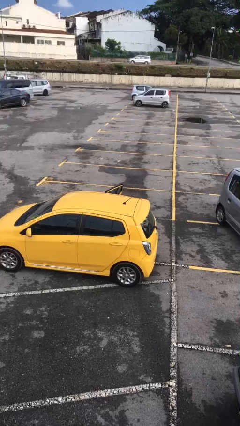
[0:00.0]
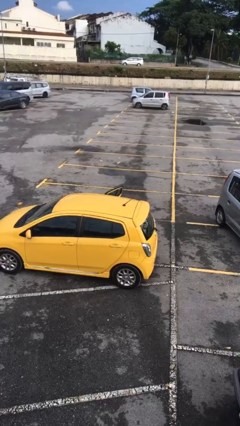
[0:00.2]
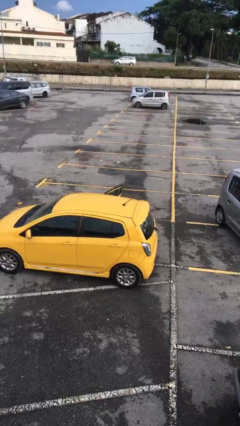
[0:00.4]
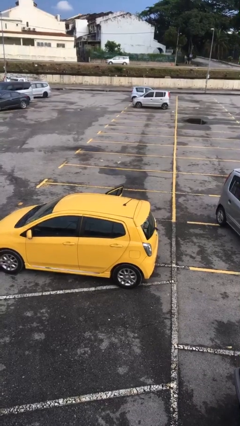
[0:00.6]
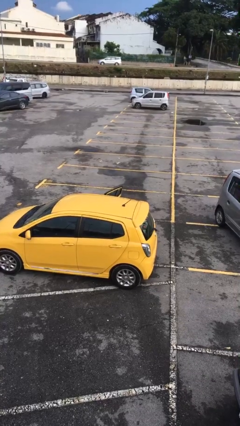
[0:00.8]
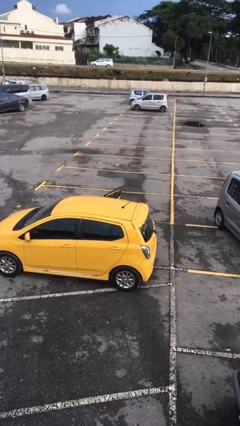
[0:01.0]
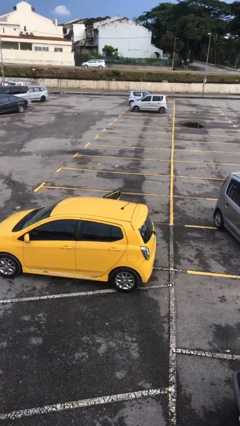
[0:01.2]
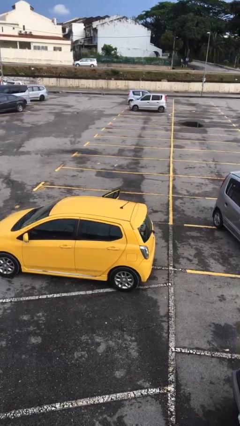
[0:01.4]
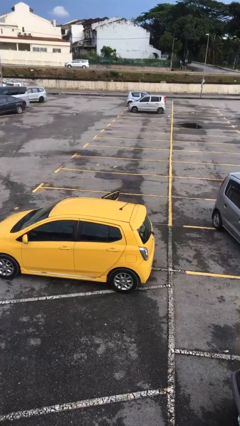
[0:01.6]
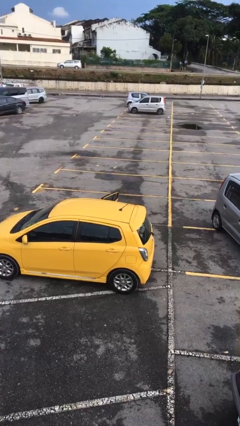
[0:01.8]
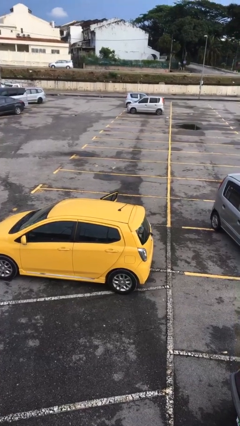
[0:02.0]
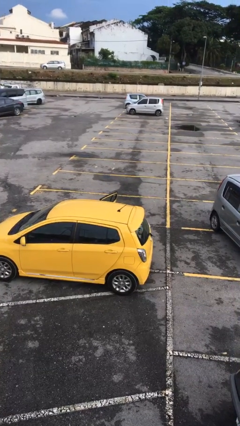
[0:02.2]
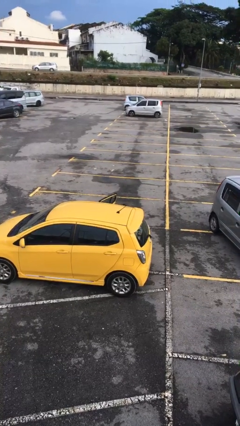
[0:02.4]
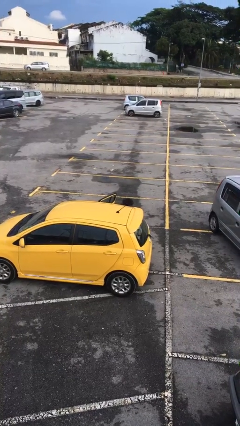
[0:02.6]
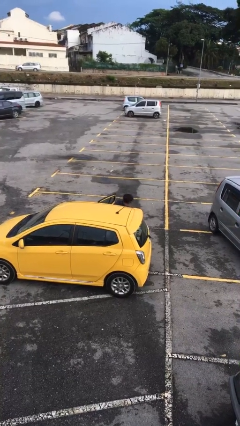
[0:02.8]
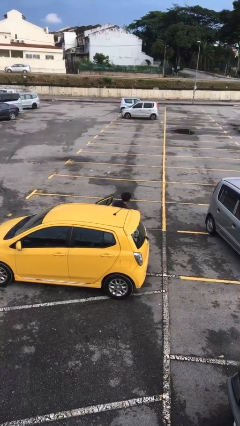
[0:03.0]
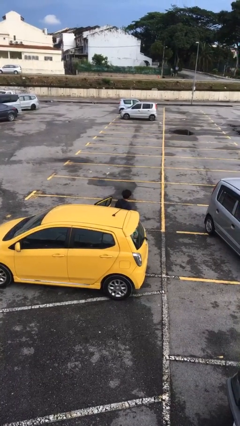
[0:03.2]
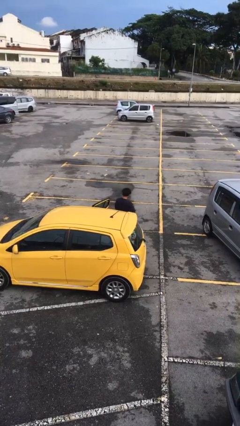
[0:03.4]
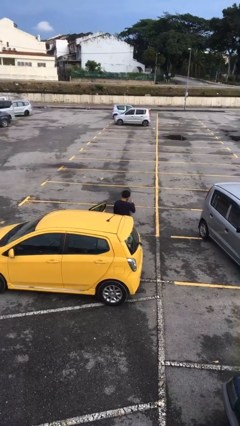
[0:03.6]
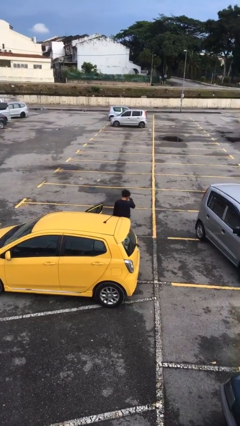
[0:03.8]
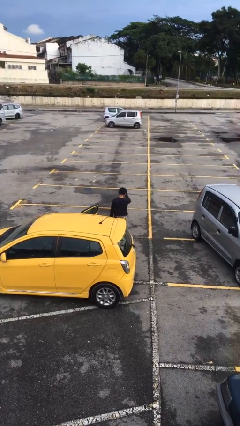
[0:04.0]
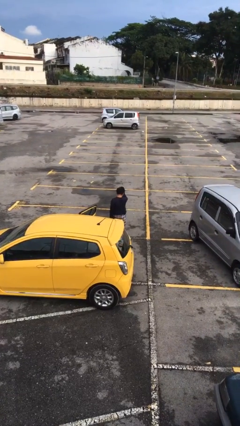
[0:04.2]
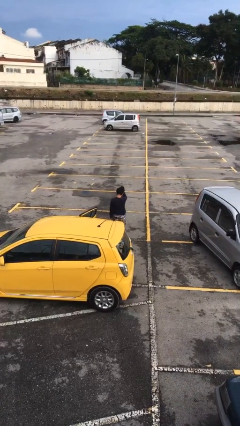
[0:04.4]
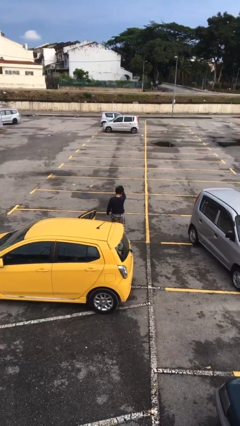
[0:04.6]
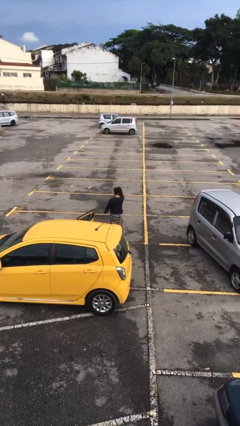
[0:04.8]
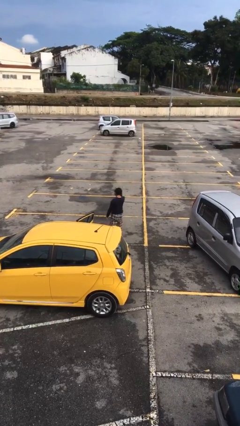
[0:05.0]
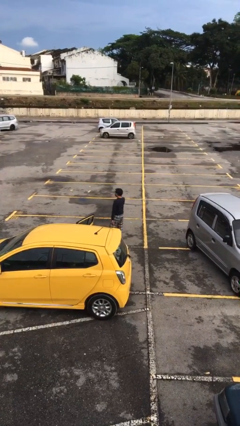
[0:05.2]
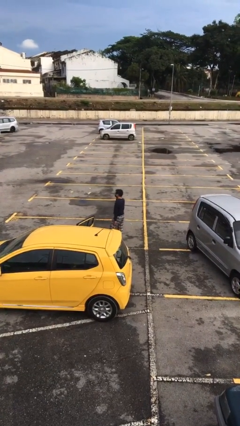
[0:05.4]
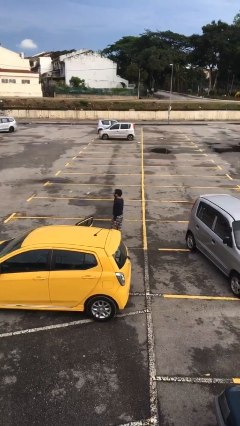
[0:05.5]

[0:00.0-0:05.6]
person exits car

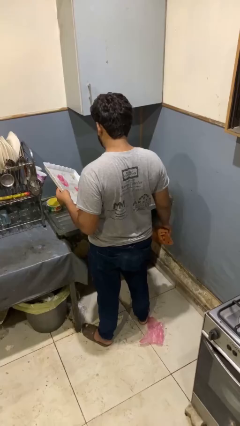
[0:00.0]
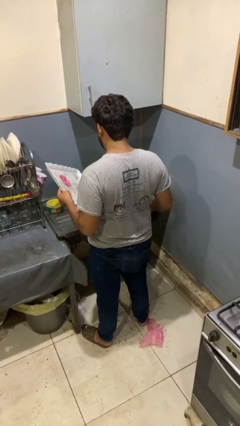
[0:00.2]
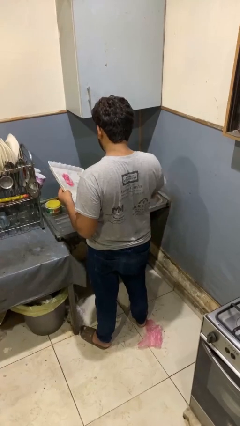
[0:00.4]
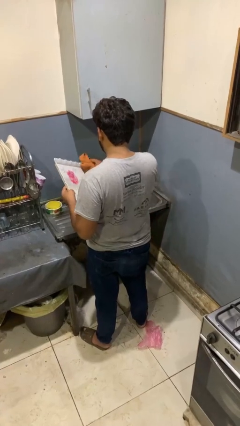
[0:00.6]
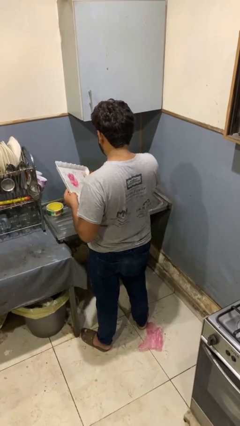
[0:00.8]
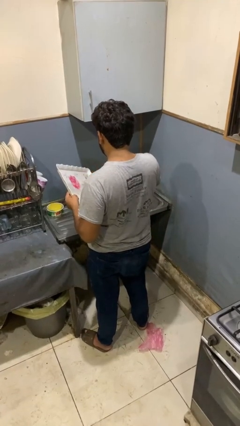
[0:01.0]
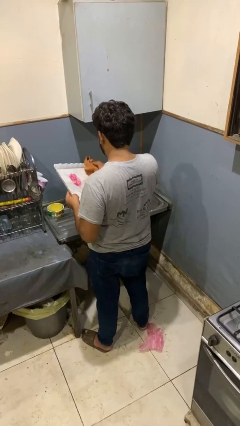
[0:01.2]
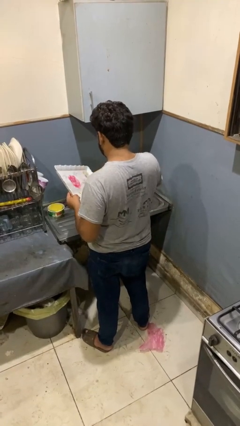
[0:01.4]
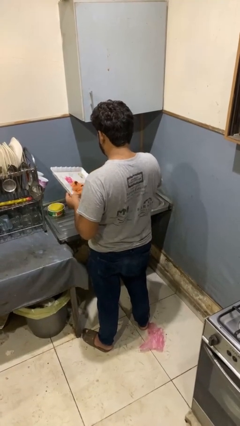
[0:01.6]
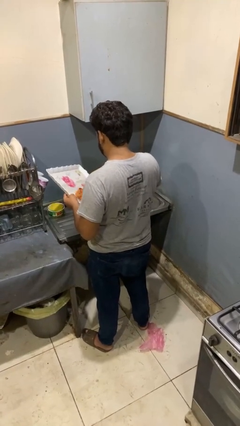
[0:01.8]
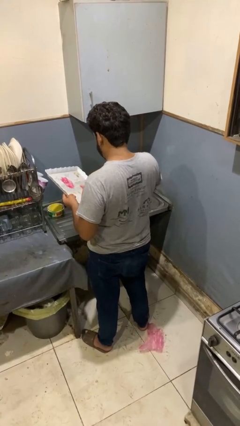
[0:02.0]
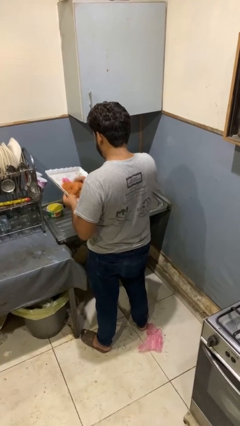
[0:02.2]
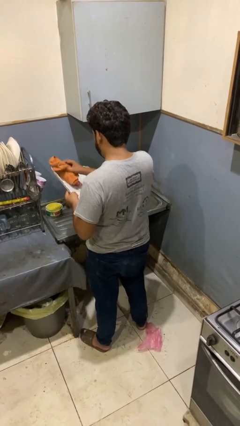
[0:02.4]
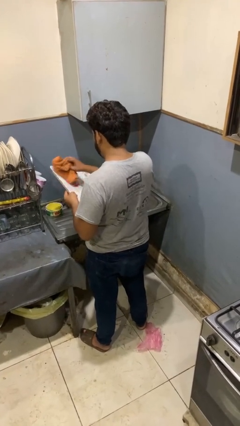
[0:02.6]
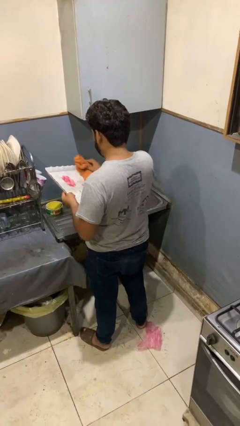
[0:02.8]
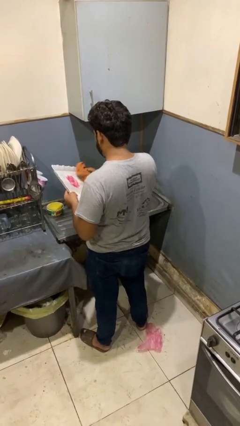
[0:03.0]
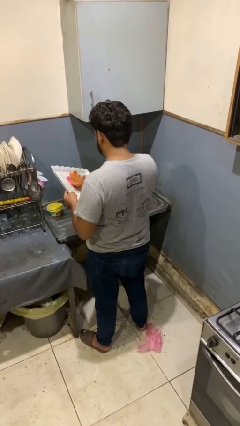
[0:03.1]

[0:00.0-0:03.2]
person dries dish

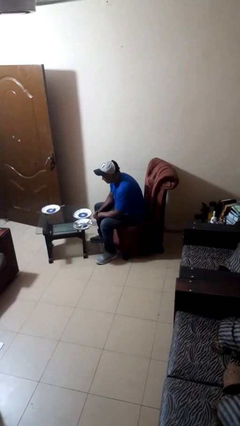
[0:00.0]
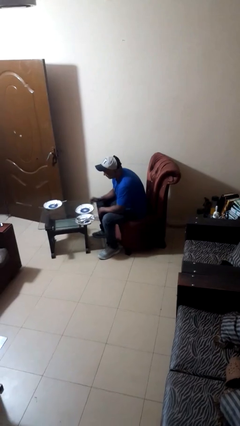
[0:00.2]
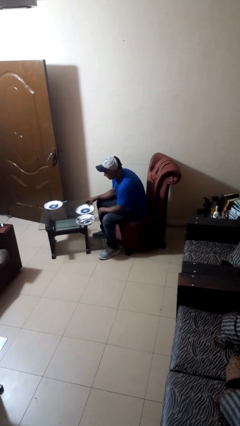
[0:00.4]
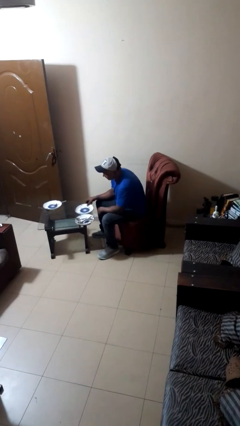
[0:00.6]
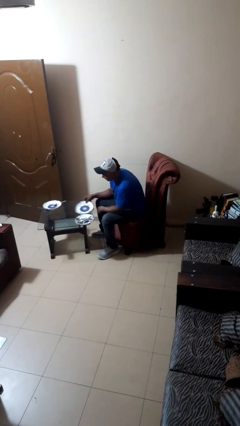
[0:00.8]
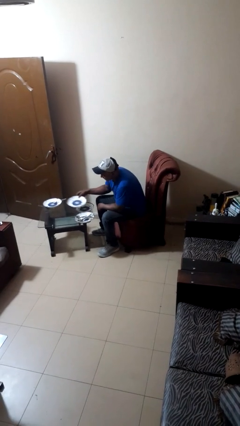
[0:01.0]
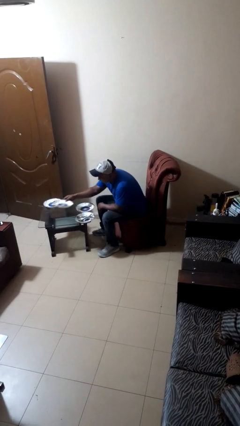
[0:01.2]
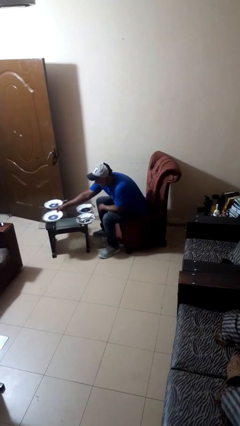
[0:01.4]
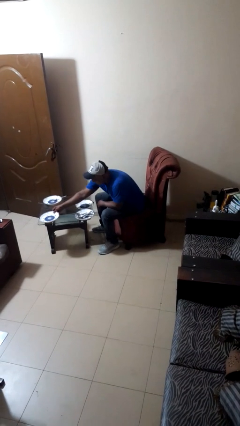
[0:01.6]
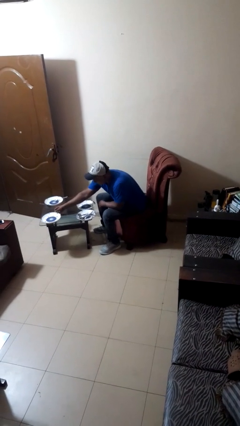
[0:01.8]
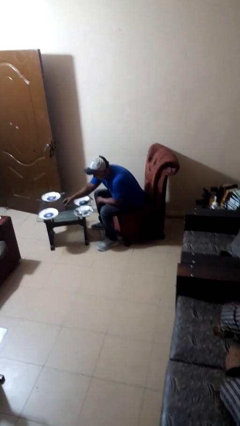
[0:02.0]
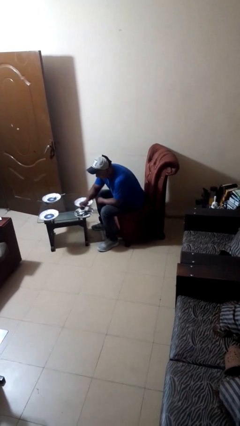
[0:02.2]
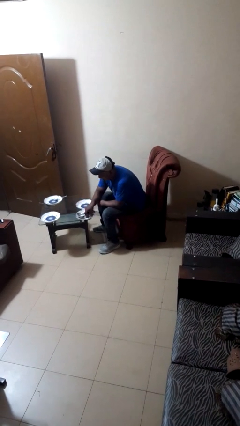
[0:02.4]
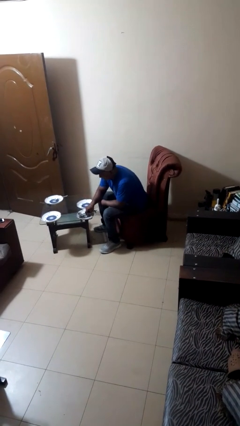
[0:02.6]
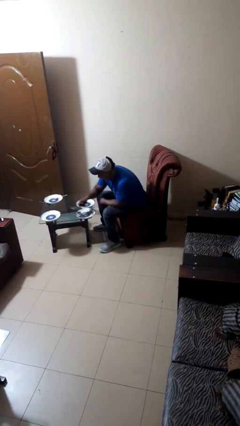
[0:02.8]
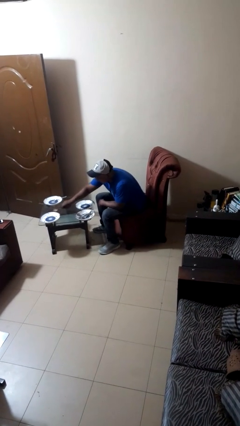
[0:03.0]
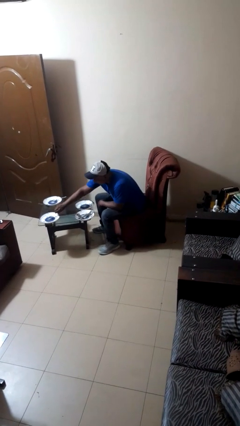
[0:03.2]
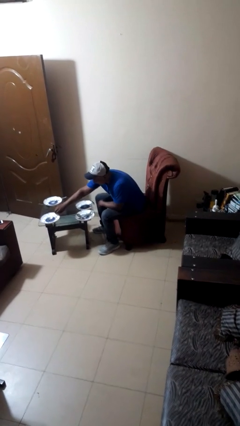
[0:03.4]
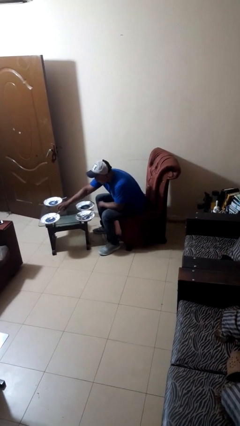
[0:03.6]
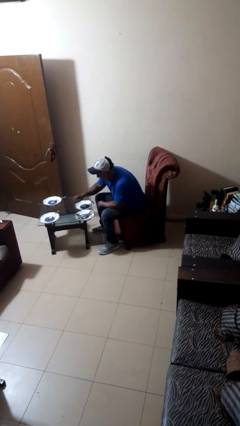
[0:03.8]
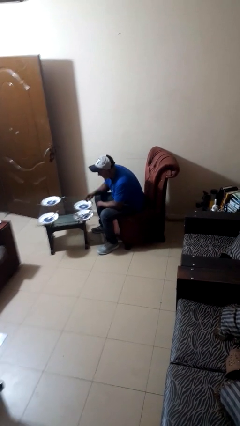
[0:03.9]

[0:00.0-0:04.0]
person sets table

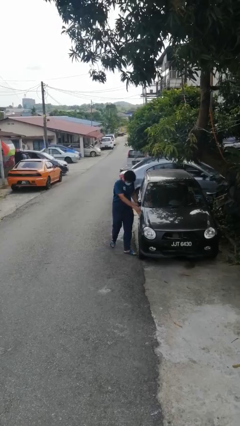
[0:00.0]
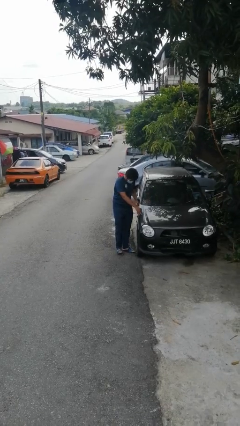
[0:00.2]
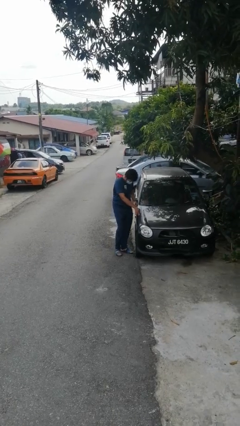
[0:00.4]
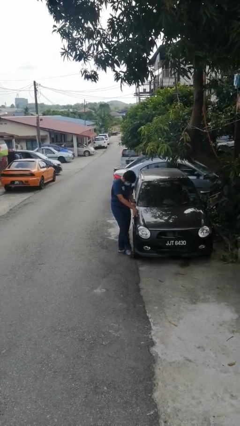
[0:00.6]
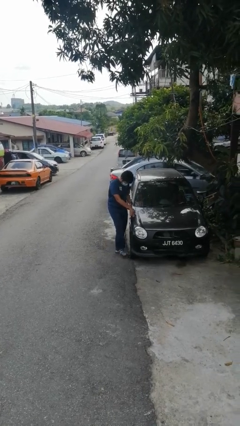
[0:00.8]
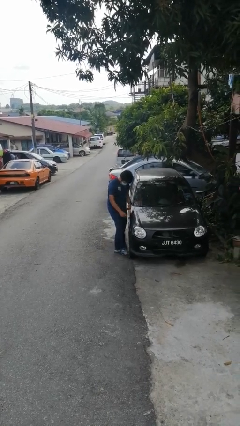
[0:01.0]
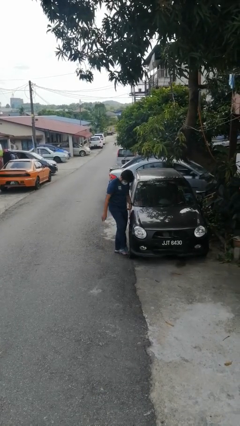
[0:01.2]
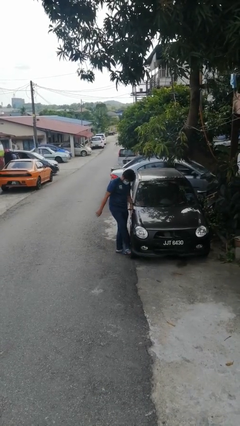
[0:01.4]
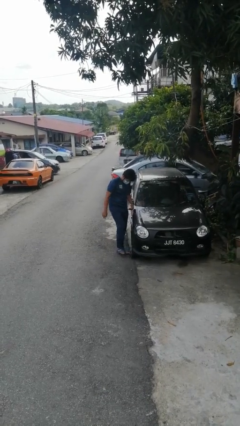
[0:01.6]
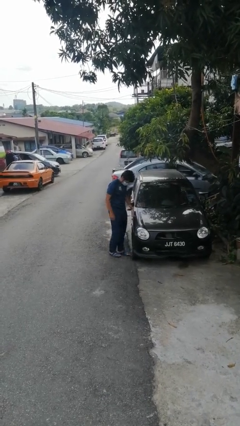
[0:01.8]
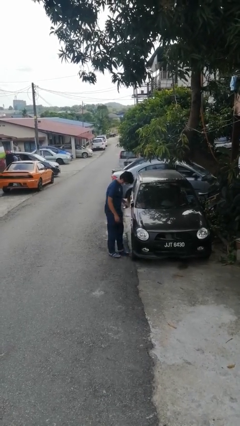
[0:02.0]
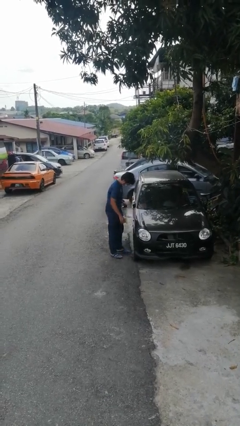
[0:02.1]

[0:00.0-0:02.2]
person kicks car tires

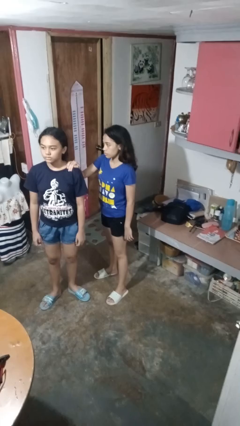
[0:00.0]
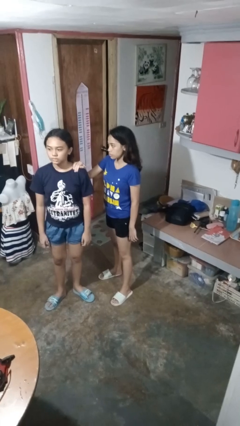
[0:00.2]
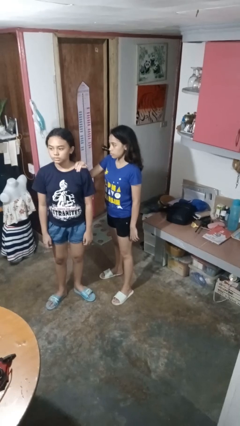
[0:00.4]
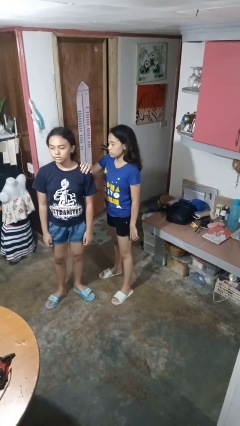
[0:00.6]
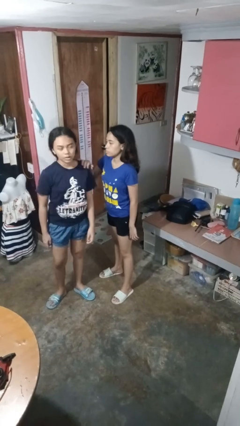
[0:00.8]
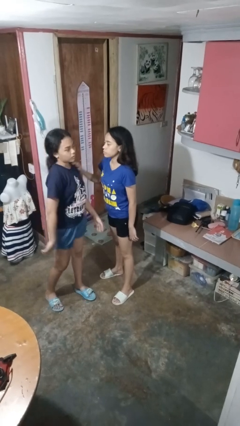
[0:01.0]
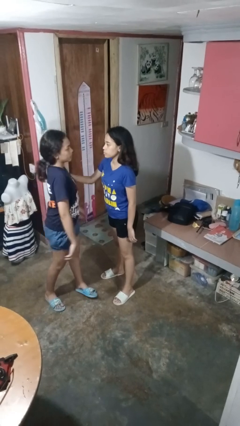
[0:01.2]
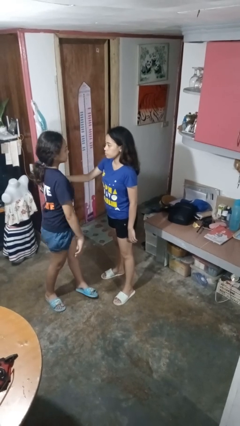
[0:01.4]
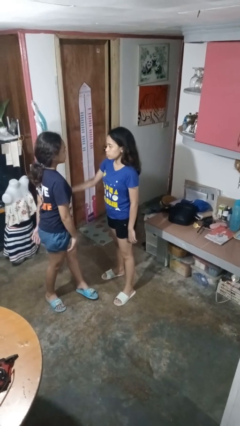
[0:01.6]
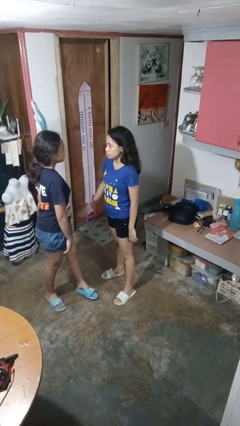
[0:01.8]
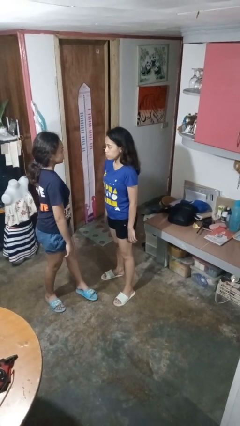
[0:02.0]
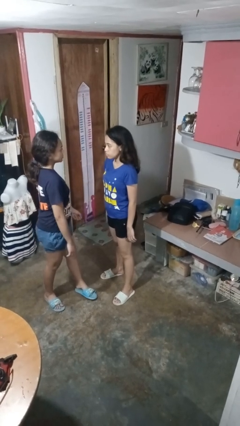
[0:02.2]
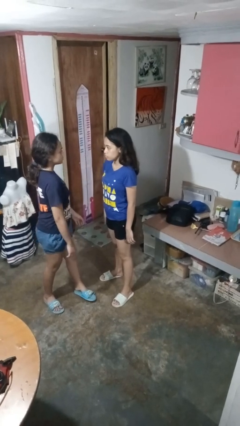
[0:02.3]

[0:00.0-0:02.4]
person spins person around
